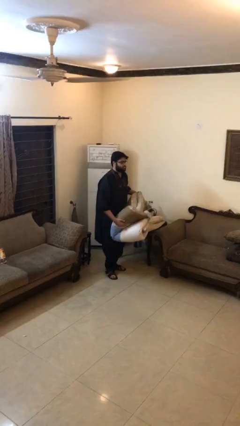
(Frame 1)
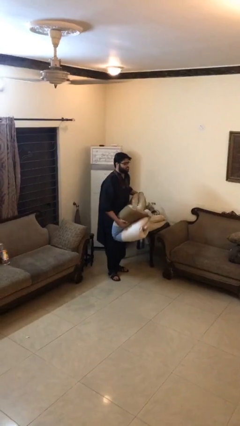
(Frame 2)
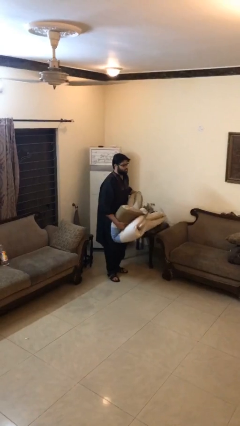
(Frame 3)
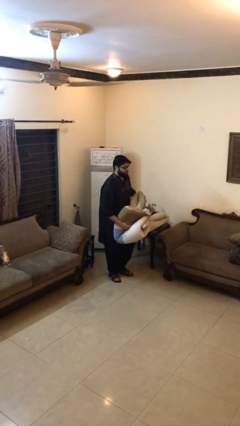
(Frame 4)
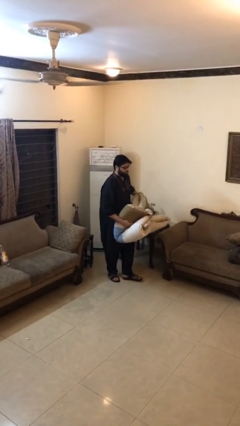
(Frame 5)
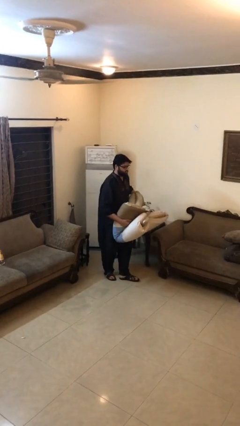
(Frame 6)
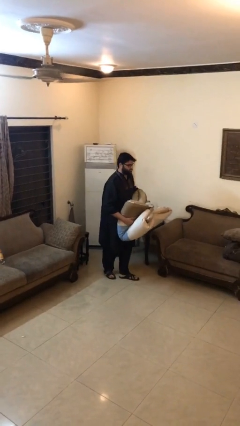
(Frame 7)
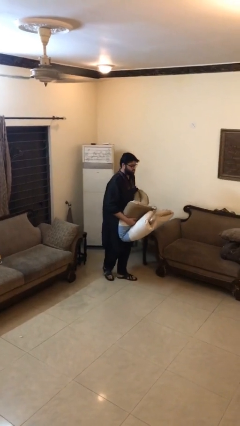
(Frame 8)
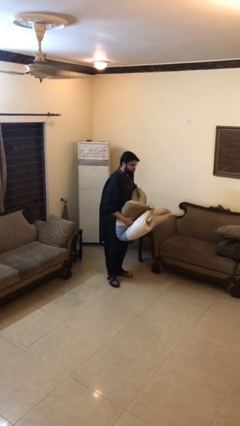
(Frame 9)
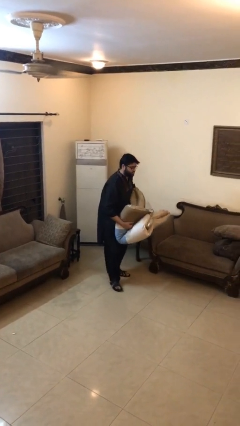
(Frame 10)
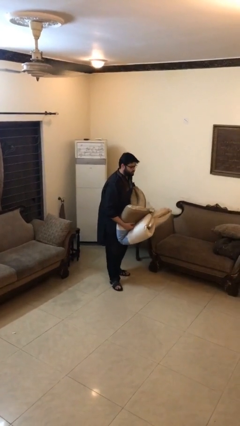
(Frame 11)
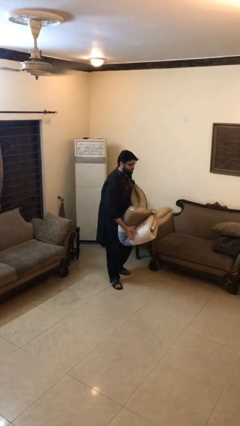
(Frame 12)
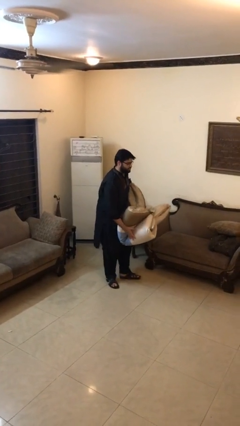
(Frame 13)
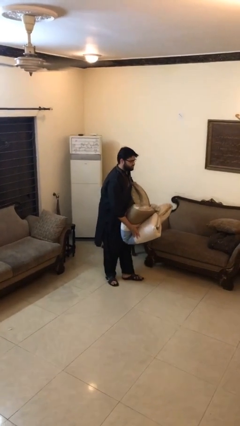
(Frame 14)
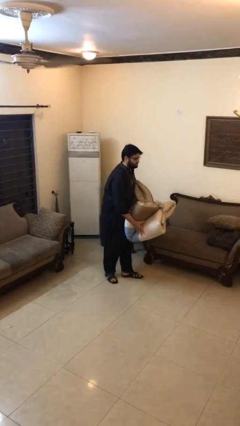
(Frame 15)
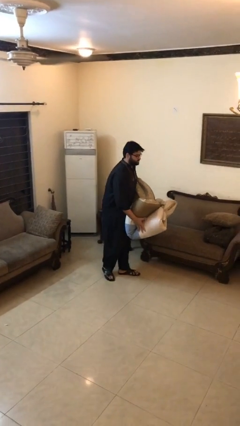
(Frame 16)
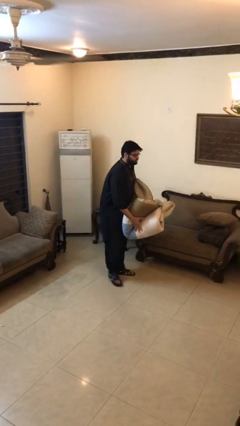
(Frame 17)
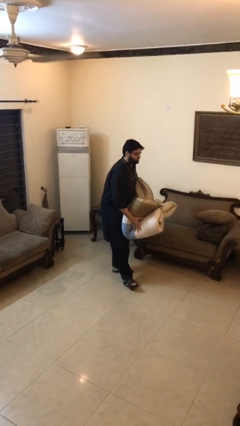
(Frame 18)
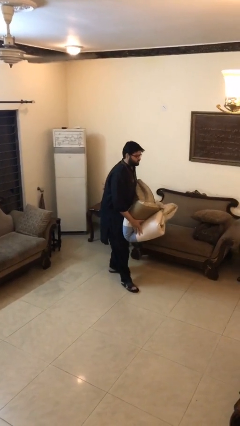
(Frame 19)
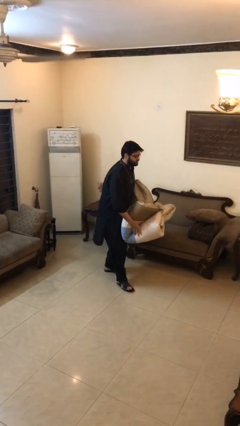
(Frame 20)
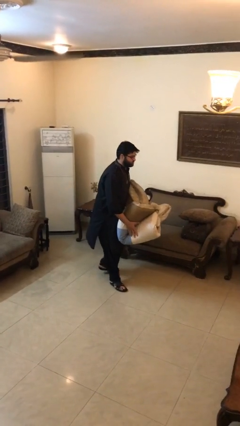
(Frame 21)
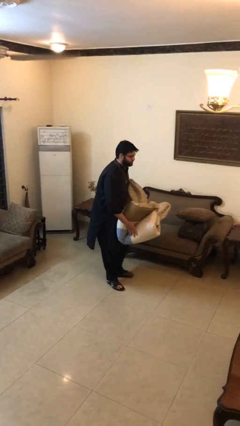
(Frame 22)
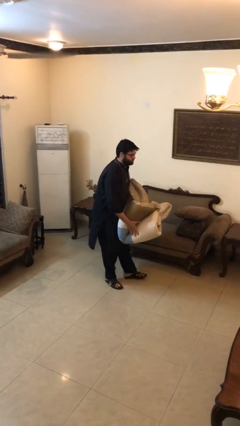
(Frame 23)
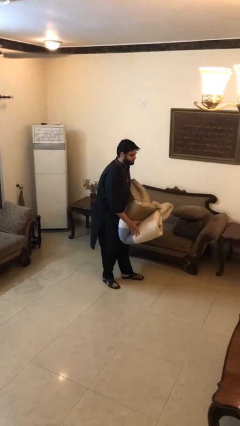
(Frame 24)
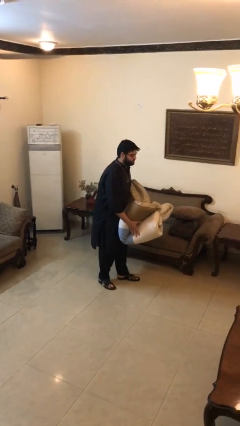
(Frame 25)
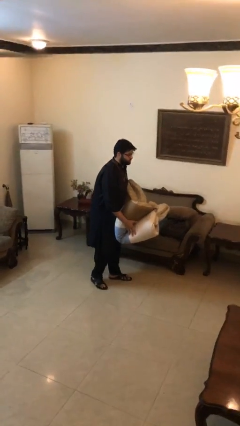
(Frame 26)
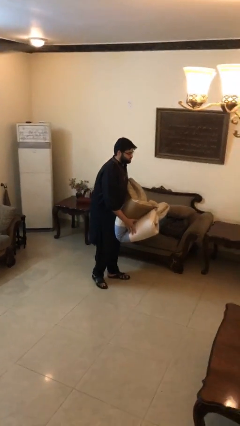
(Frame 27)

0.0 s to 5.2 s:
person carries heavy object

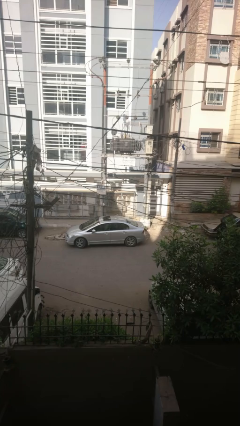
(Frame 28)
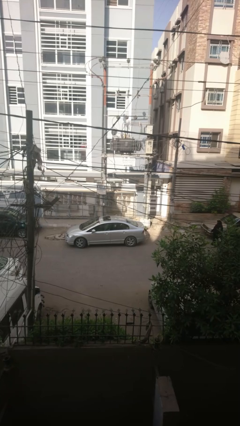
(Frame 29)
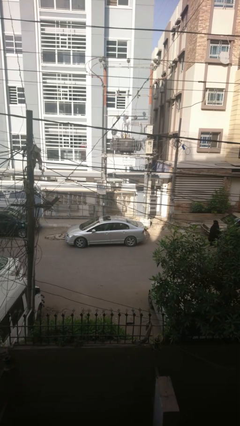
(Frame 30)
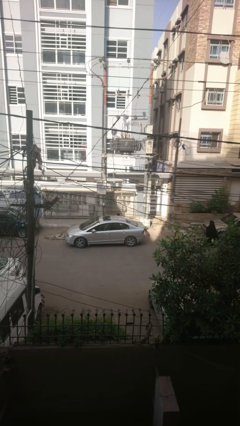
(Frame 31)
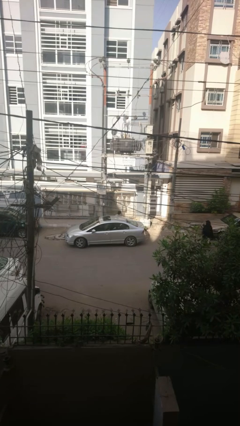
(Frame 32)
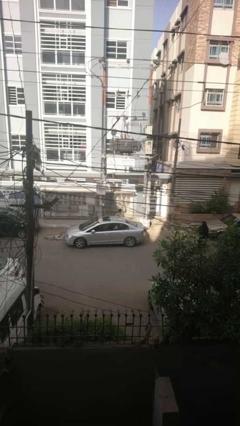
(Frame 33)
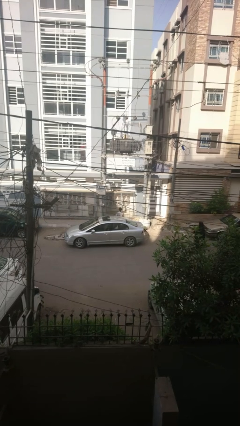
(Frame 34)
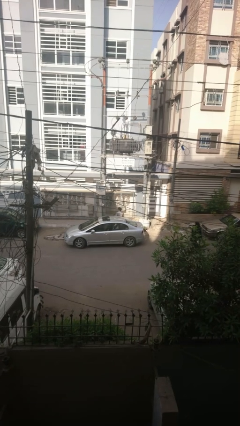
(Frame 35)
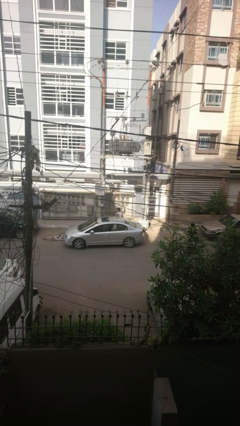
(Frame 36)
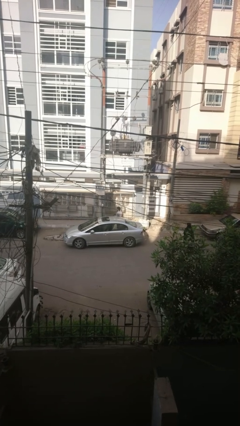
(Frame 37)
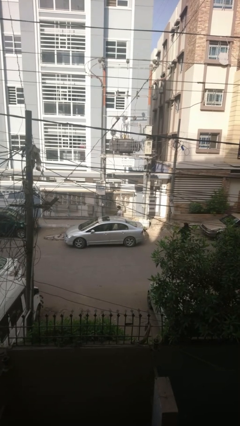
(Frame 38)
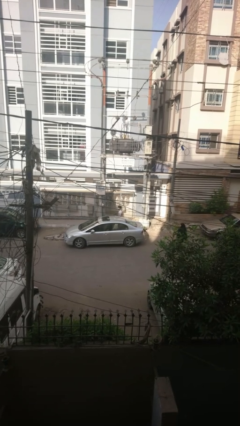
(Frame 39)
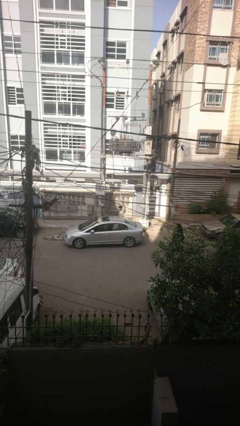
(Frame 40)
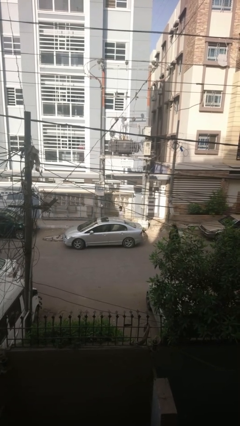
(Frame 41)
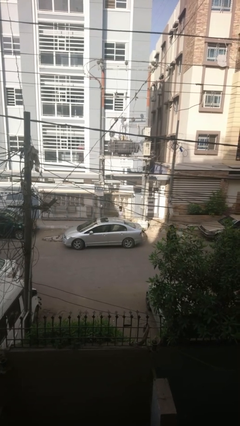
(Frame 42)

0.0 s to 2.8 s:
person exits car

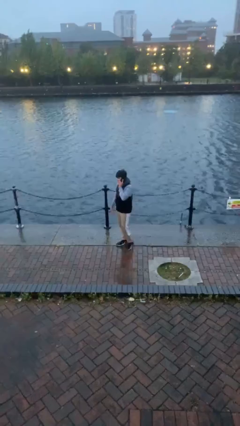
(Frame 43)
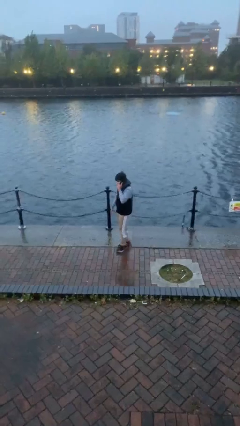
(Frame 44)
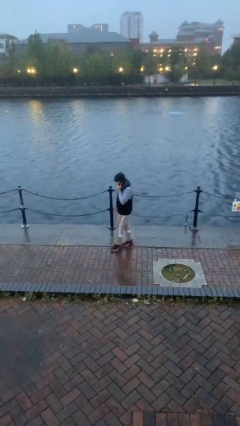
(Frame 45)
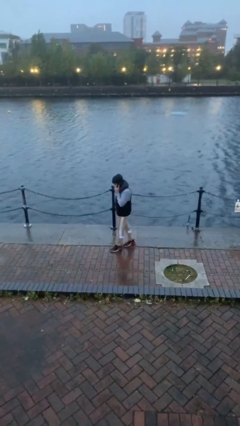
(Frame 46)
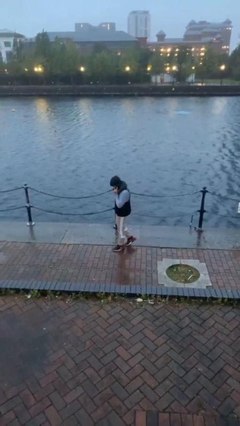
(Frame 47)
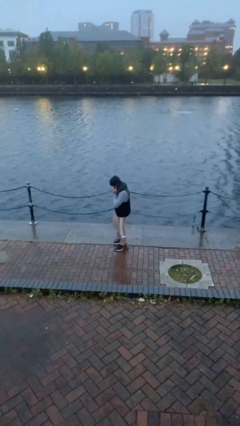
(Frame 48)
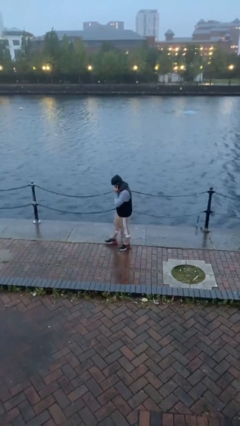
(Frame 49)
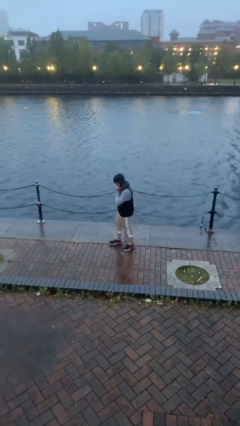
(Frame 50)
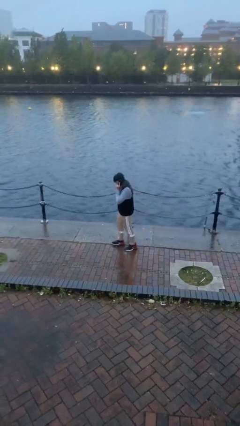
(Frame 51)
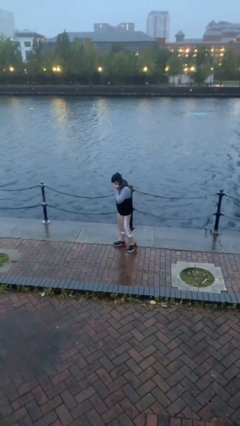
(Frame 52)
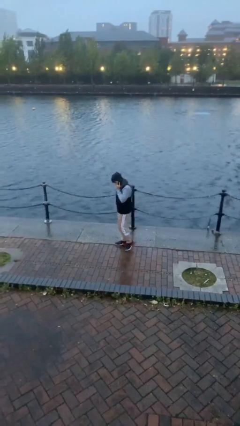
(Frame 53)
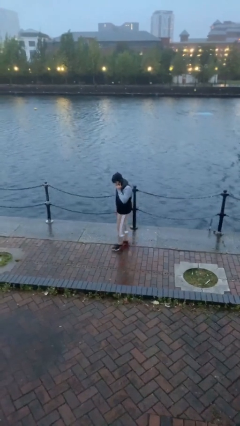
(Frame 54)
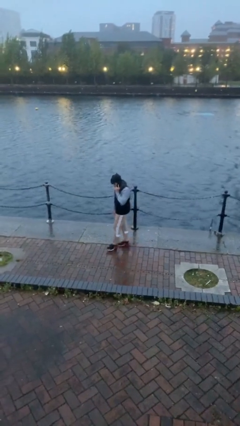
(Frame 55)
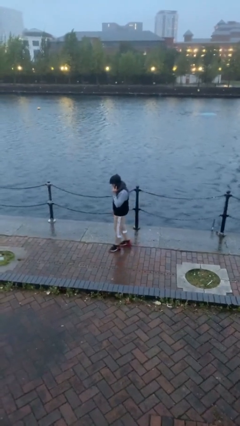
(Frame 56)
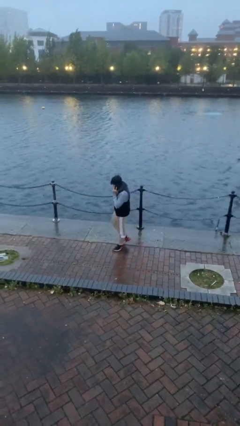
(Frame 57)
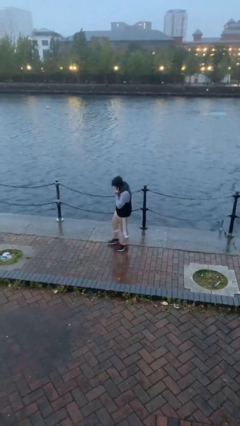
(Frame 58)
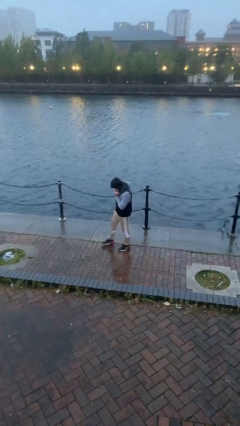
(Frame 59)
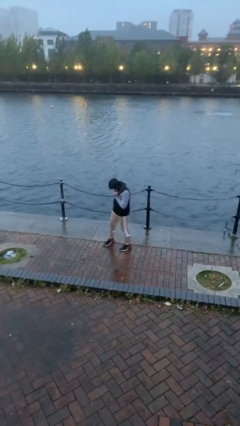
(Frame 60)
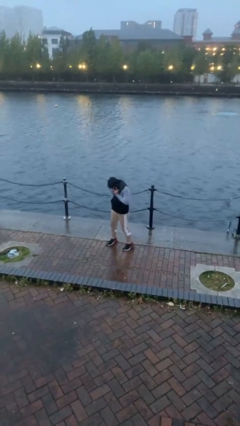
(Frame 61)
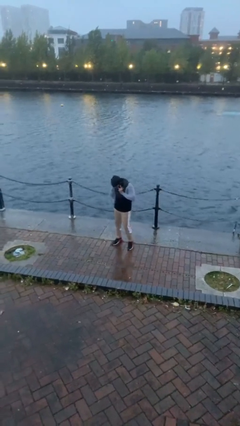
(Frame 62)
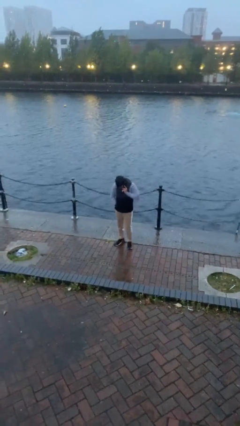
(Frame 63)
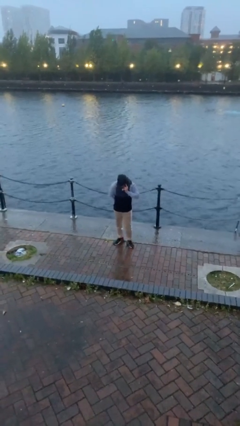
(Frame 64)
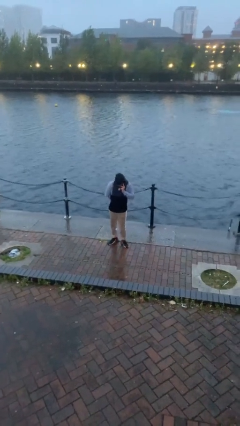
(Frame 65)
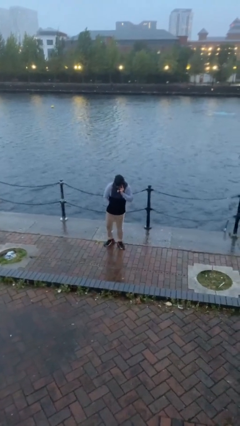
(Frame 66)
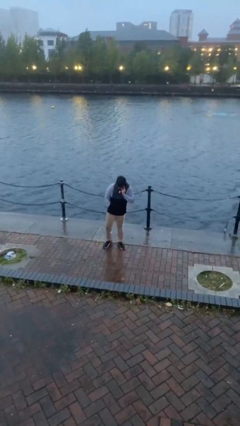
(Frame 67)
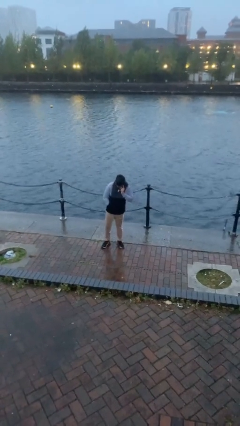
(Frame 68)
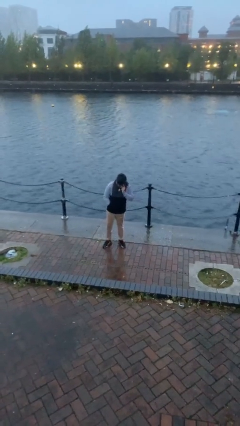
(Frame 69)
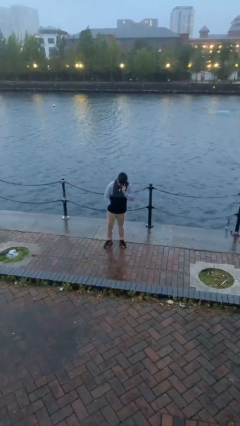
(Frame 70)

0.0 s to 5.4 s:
person talks on phone

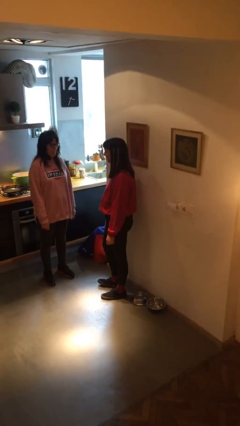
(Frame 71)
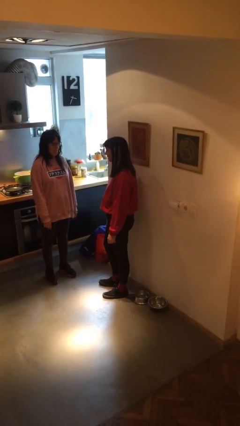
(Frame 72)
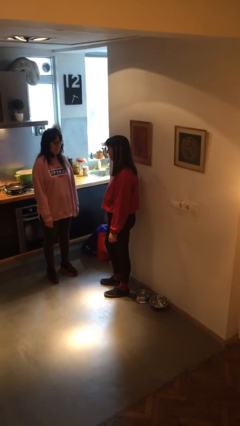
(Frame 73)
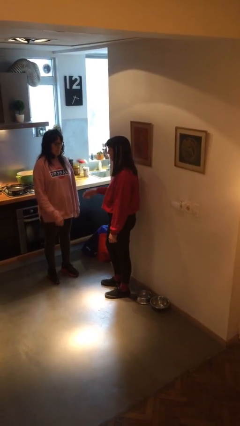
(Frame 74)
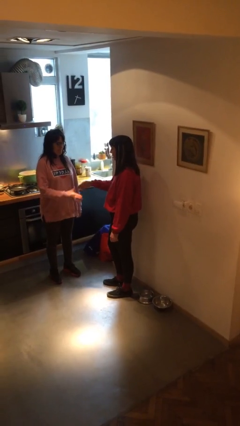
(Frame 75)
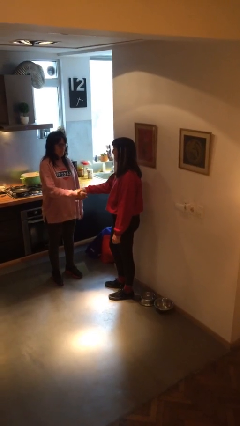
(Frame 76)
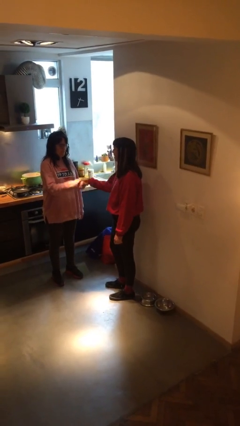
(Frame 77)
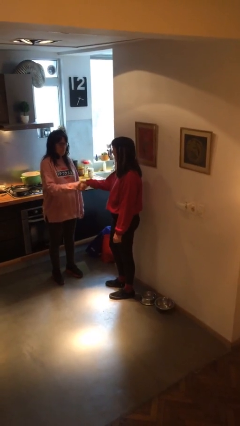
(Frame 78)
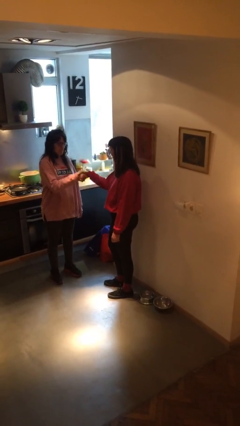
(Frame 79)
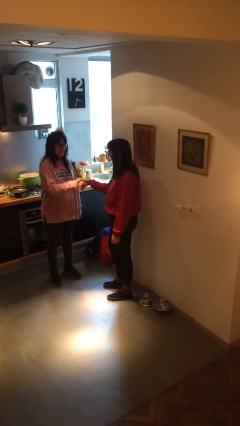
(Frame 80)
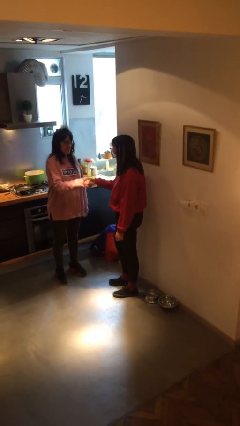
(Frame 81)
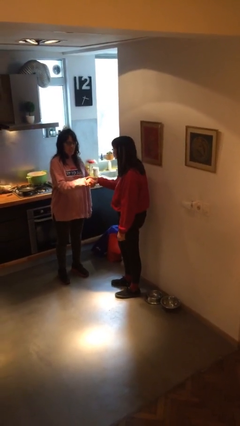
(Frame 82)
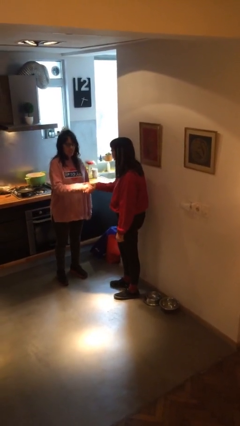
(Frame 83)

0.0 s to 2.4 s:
person shakes hand

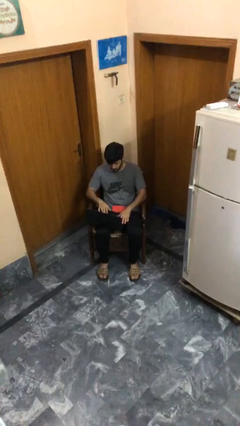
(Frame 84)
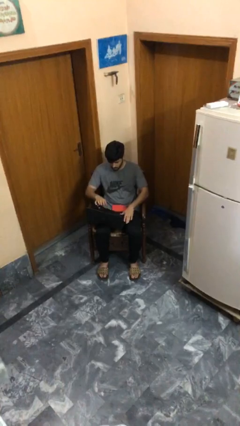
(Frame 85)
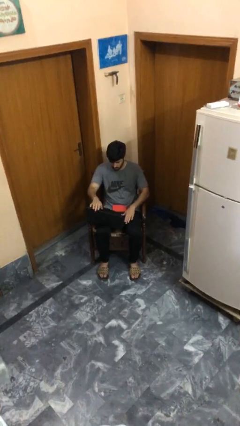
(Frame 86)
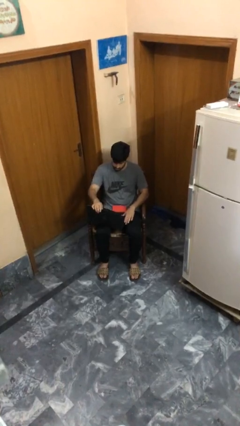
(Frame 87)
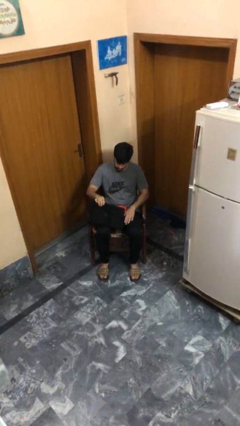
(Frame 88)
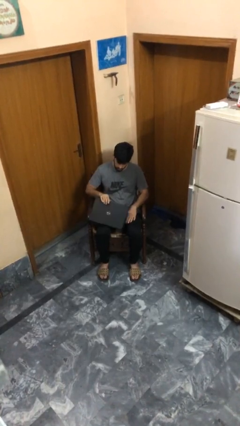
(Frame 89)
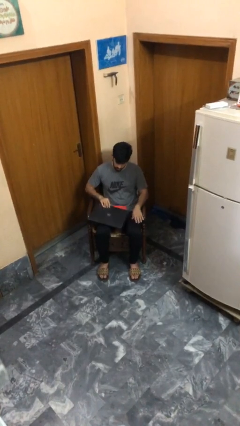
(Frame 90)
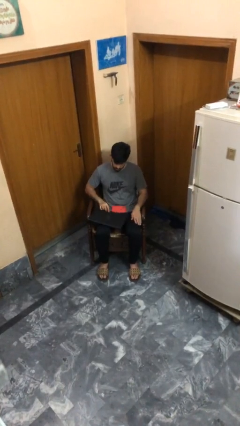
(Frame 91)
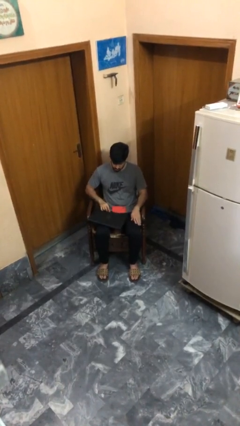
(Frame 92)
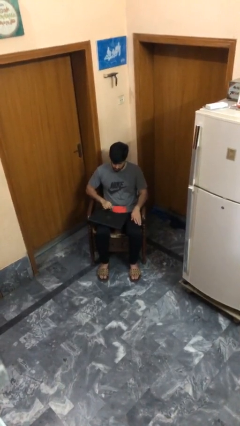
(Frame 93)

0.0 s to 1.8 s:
person closes laptop
